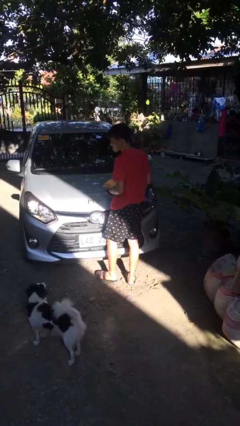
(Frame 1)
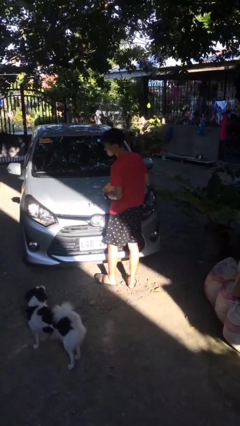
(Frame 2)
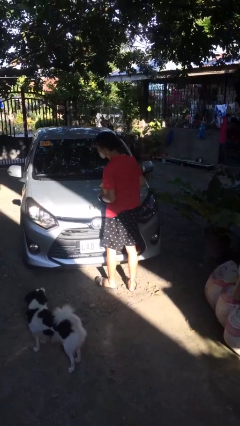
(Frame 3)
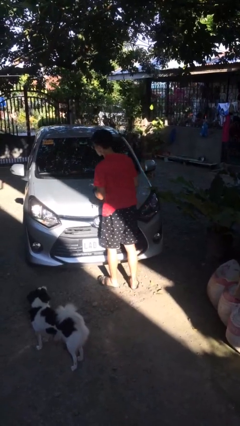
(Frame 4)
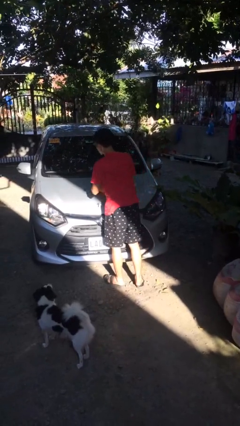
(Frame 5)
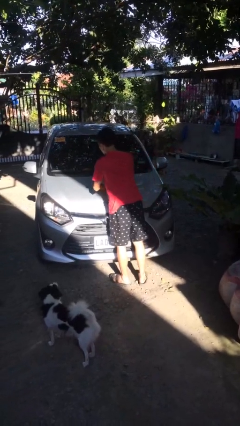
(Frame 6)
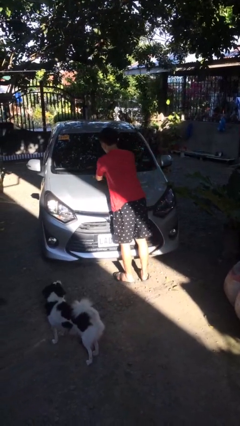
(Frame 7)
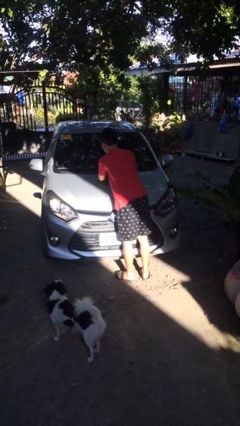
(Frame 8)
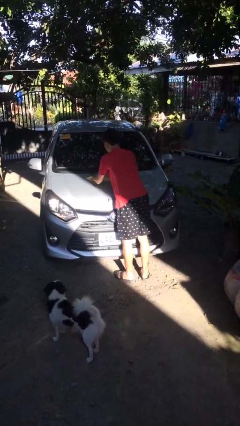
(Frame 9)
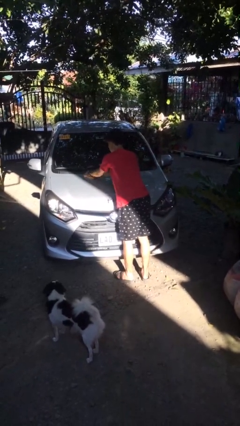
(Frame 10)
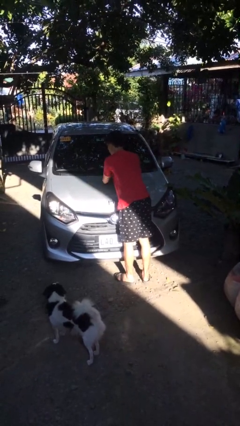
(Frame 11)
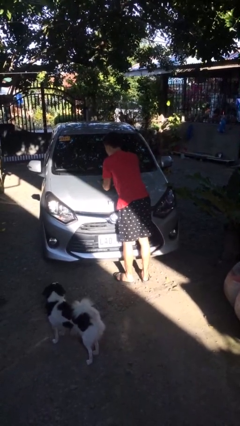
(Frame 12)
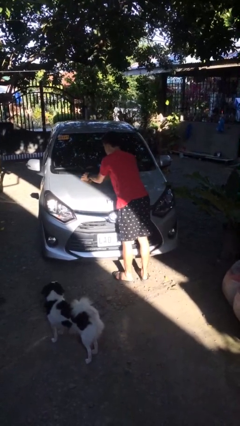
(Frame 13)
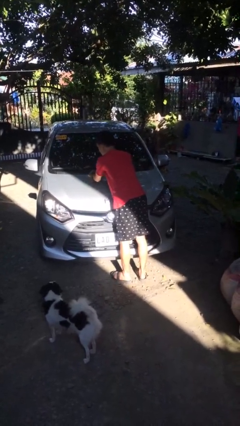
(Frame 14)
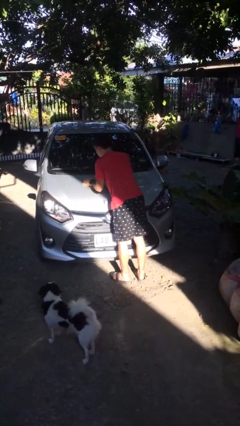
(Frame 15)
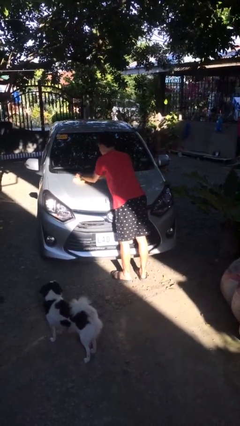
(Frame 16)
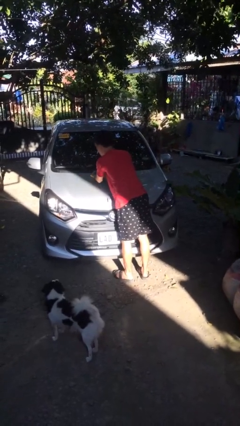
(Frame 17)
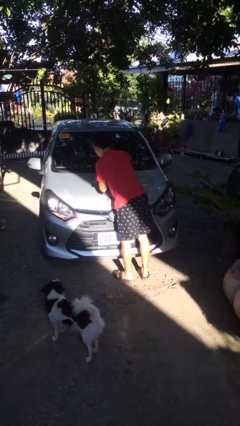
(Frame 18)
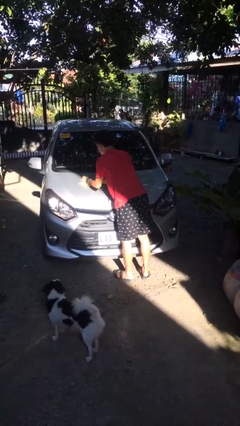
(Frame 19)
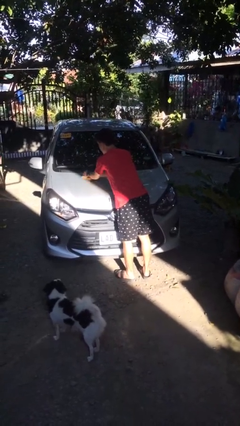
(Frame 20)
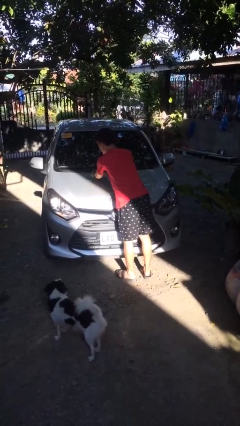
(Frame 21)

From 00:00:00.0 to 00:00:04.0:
person polishes car with rag

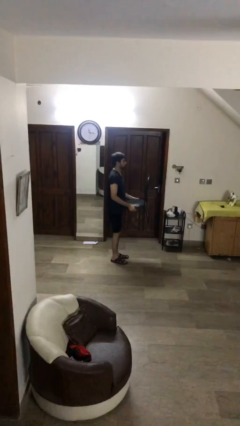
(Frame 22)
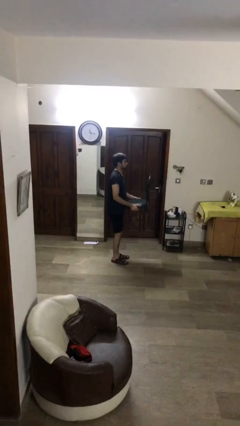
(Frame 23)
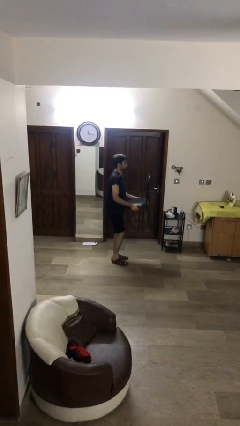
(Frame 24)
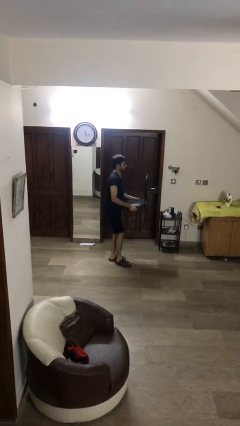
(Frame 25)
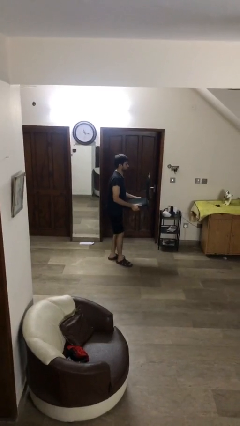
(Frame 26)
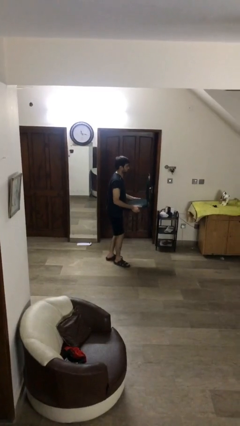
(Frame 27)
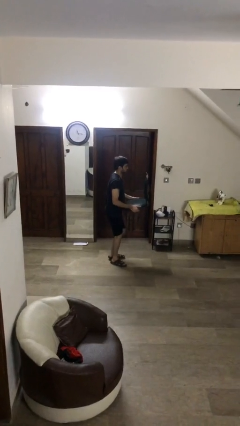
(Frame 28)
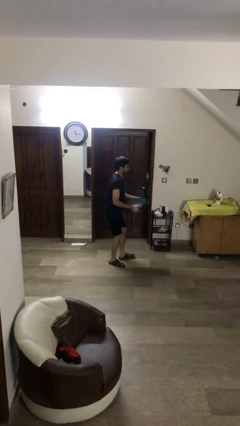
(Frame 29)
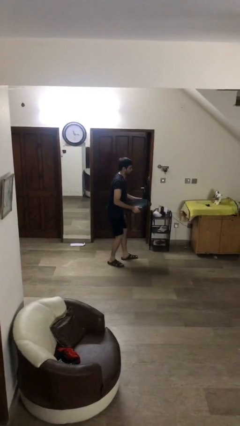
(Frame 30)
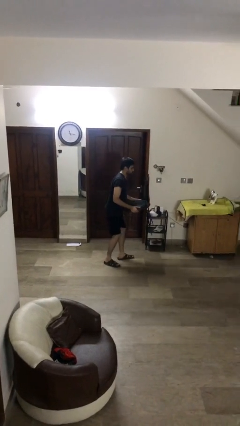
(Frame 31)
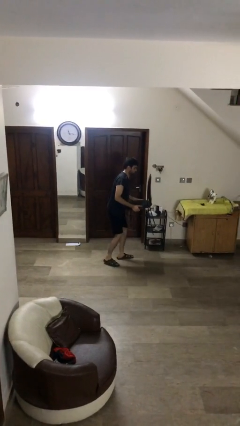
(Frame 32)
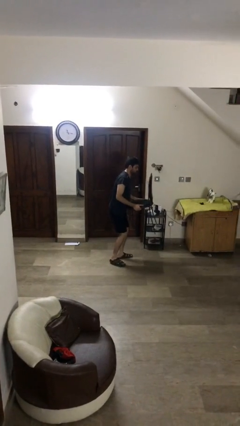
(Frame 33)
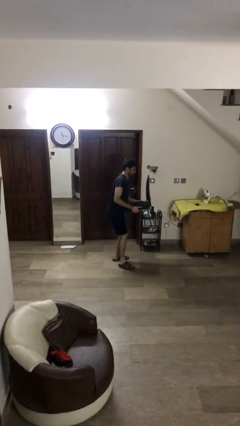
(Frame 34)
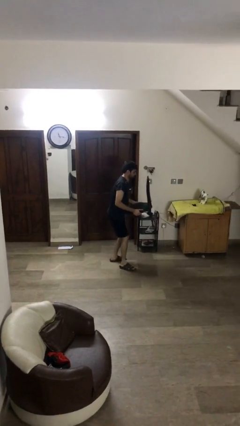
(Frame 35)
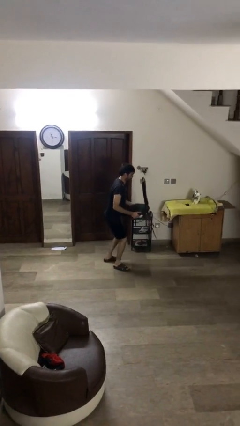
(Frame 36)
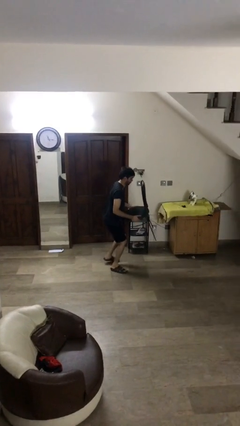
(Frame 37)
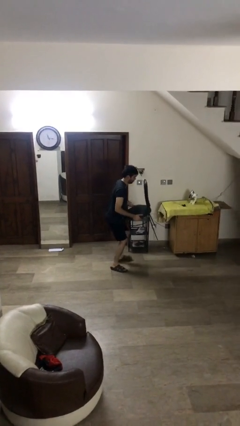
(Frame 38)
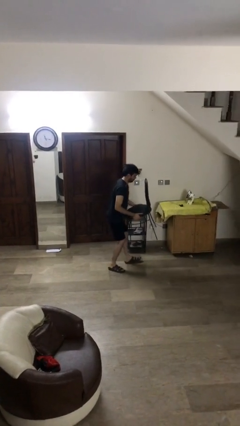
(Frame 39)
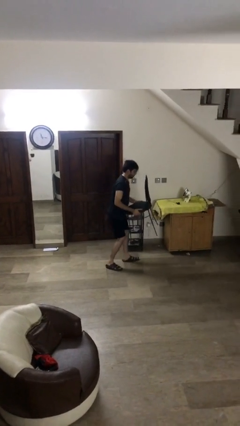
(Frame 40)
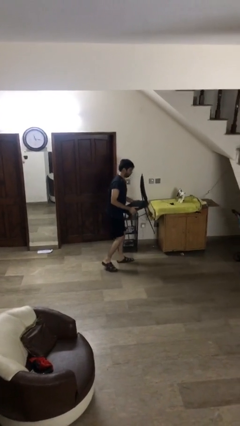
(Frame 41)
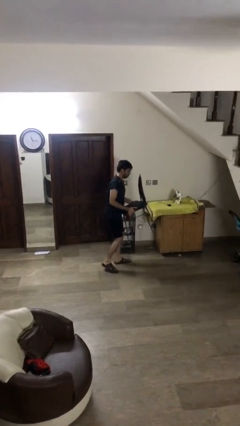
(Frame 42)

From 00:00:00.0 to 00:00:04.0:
person carries heavy object

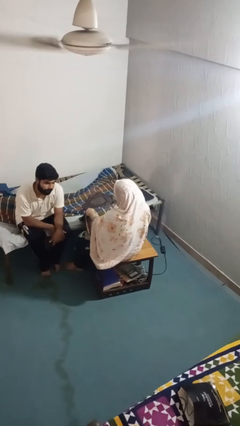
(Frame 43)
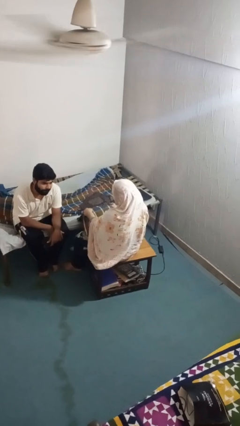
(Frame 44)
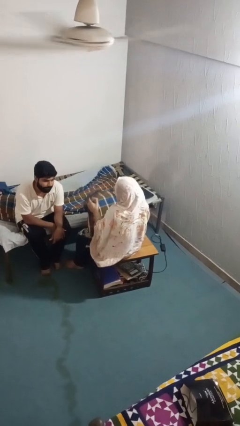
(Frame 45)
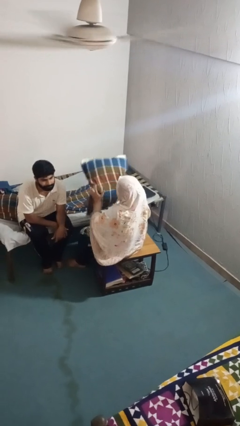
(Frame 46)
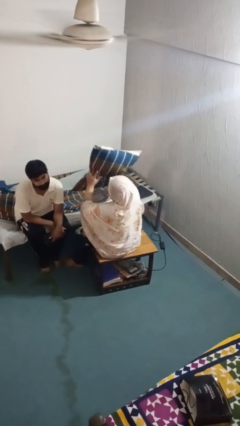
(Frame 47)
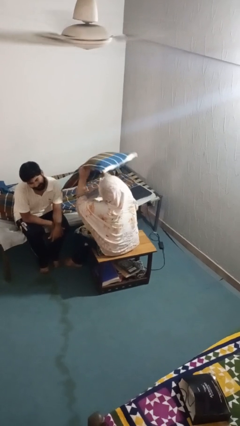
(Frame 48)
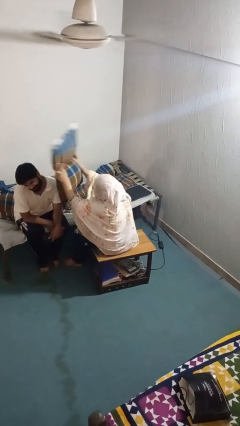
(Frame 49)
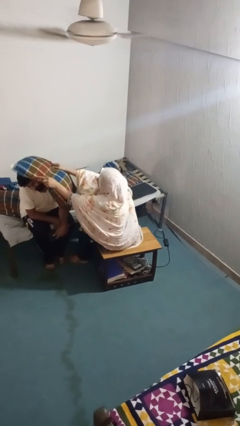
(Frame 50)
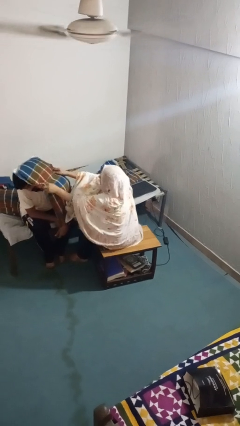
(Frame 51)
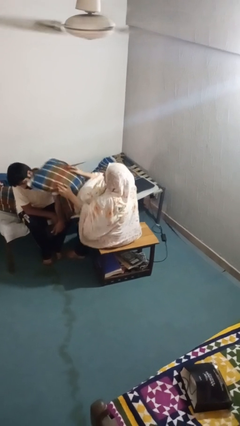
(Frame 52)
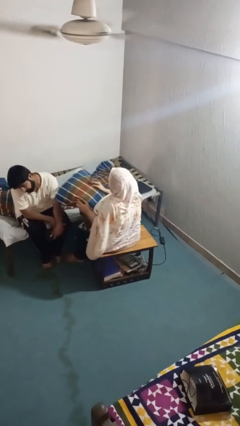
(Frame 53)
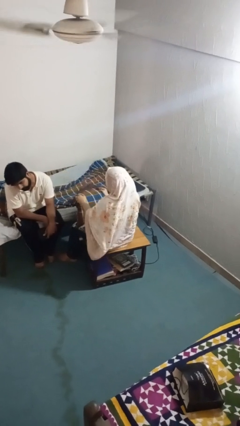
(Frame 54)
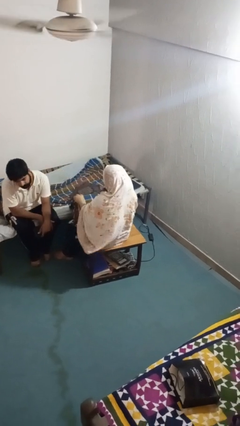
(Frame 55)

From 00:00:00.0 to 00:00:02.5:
person hits person with pillow

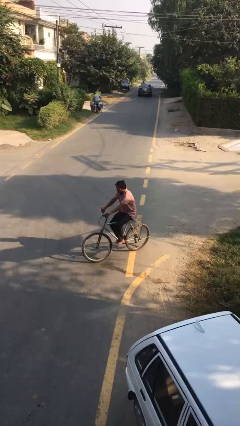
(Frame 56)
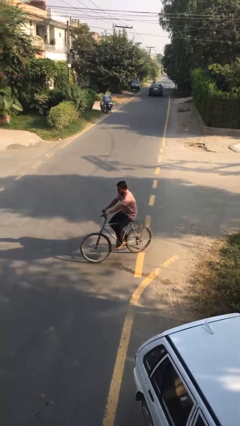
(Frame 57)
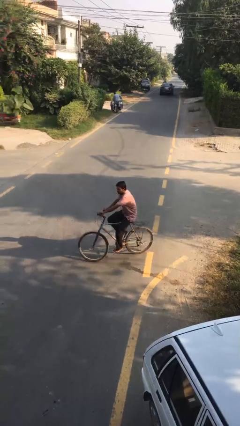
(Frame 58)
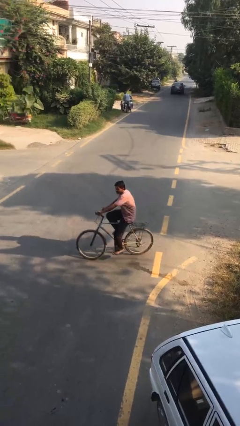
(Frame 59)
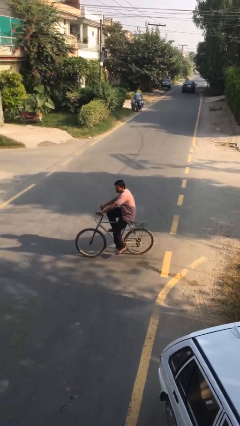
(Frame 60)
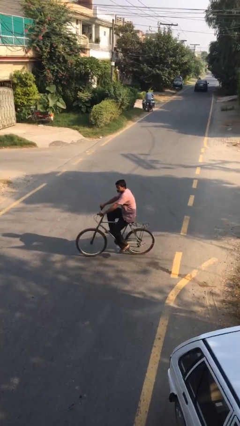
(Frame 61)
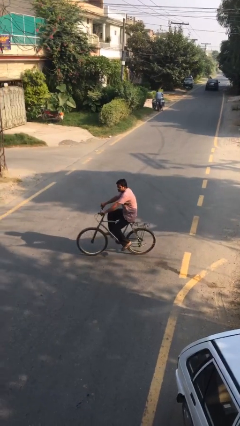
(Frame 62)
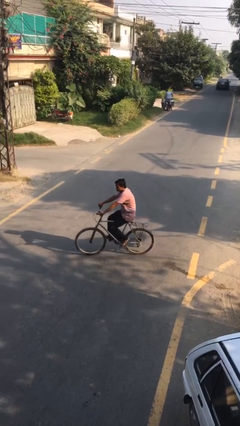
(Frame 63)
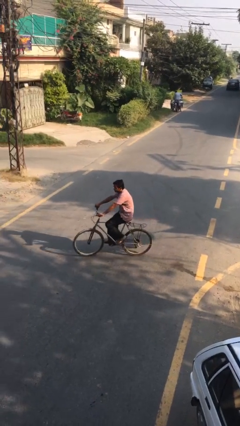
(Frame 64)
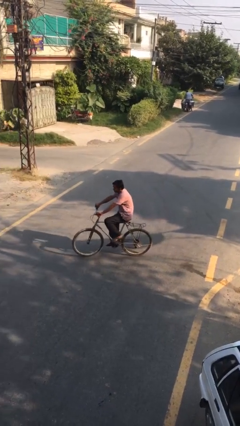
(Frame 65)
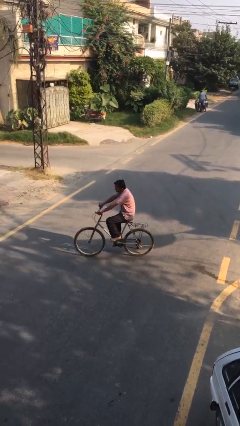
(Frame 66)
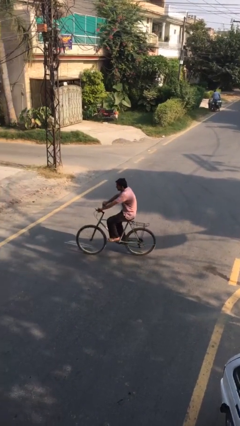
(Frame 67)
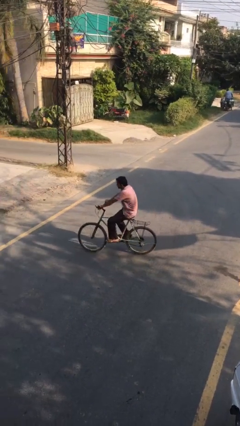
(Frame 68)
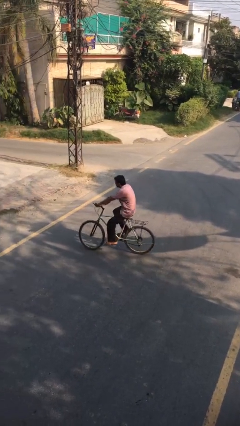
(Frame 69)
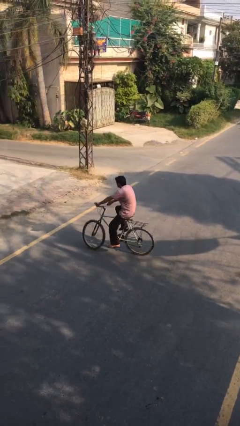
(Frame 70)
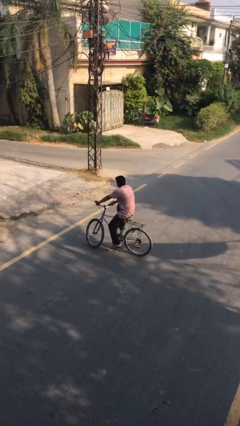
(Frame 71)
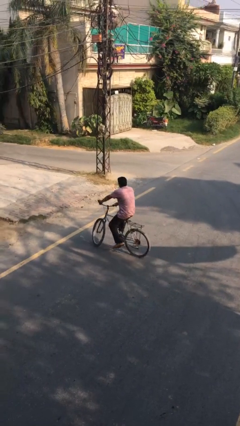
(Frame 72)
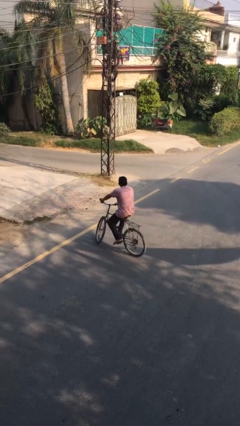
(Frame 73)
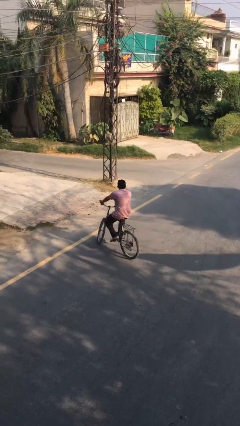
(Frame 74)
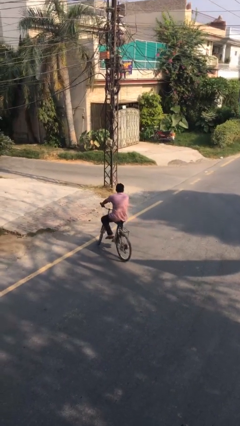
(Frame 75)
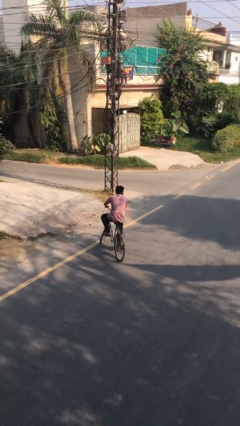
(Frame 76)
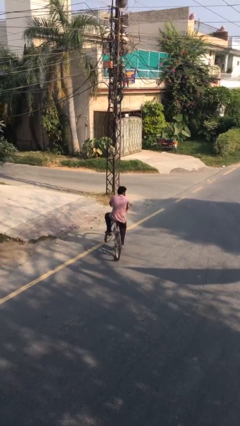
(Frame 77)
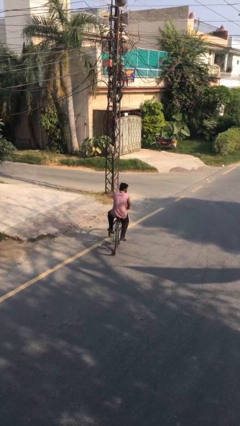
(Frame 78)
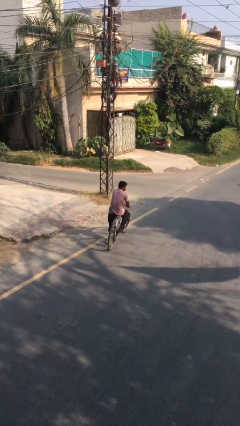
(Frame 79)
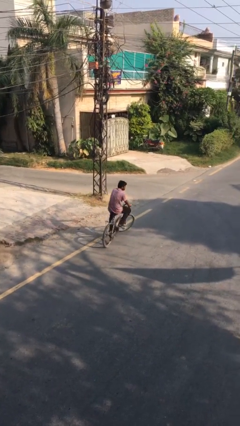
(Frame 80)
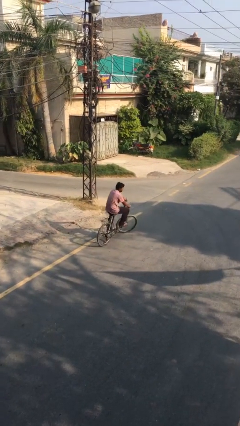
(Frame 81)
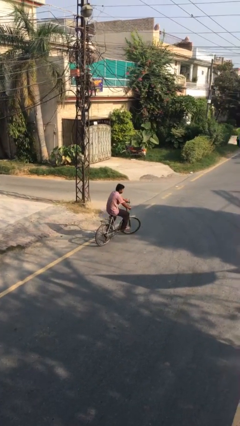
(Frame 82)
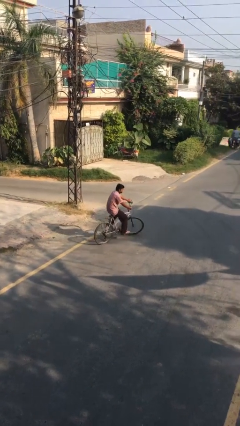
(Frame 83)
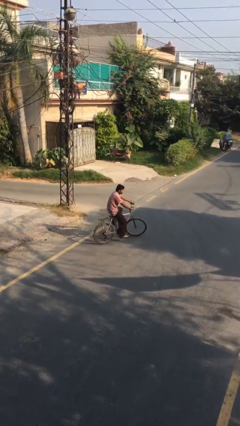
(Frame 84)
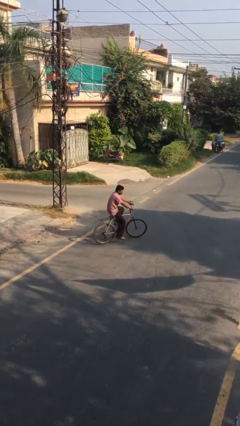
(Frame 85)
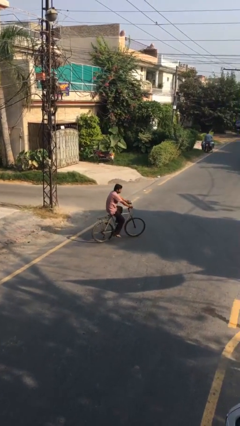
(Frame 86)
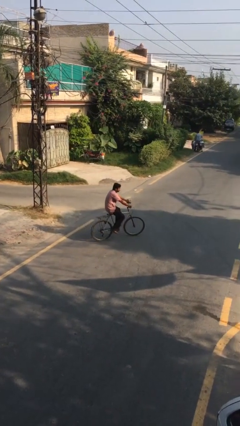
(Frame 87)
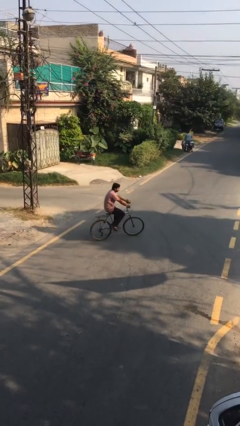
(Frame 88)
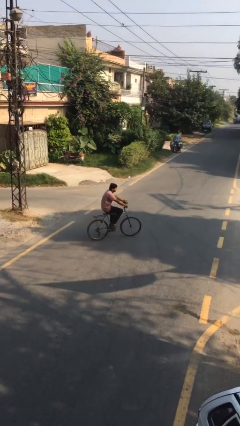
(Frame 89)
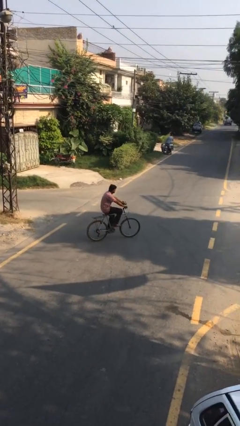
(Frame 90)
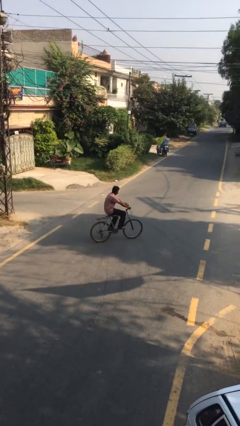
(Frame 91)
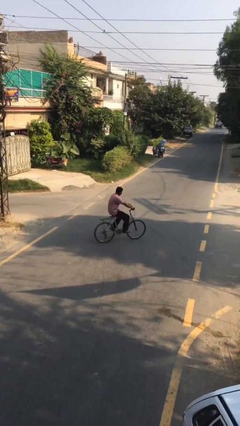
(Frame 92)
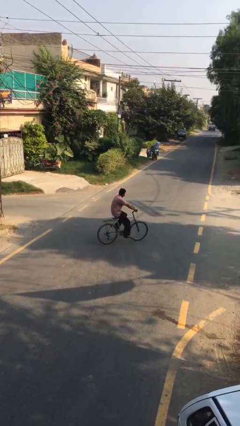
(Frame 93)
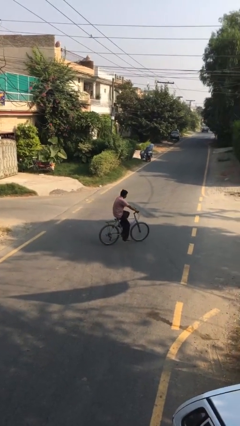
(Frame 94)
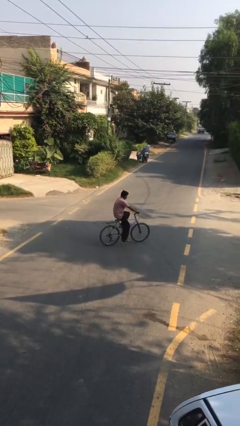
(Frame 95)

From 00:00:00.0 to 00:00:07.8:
person rides bicycle
